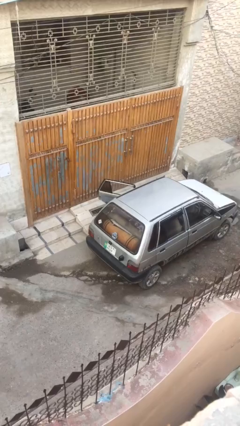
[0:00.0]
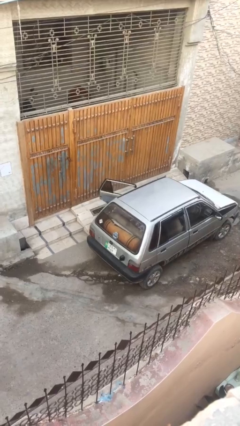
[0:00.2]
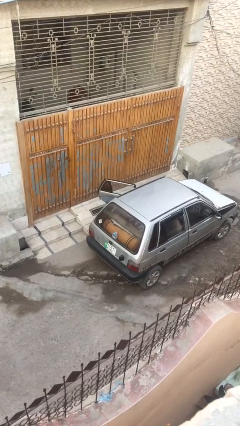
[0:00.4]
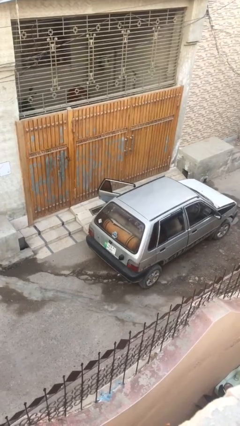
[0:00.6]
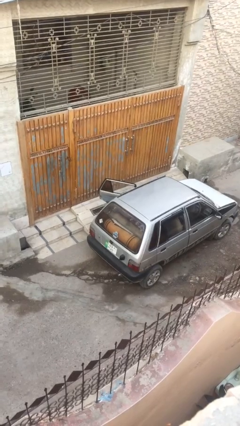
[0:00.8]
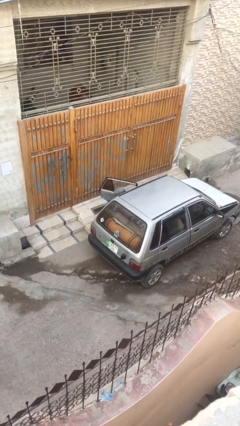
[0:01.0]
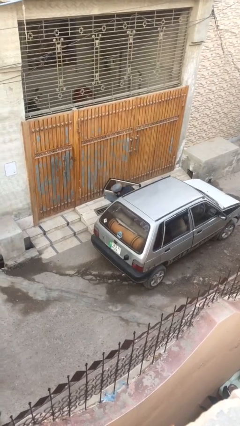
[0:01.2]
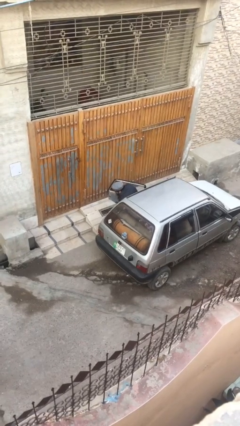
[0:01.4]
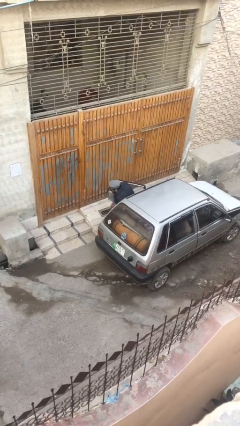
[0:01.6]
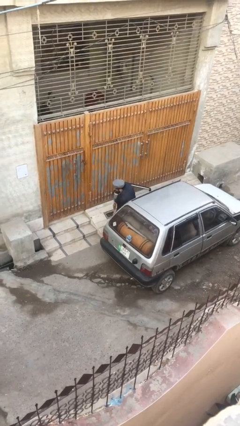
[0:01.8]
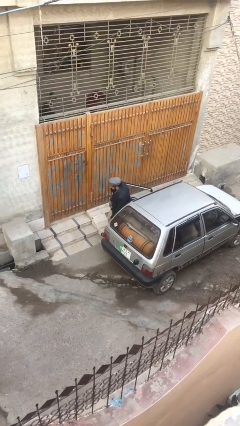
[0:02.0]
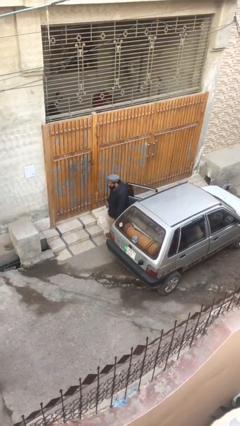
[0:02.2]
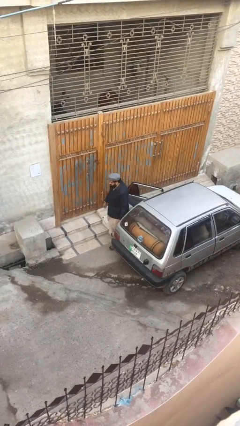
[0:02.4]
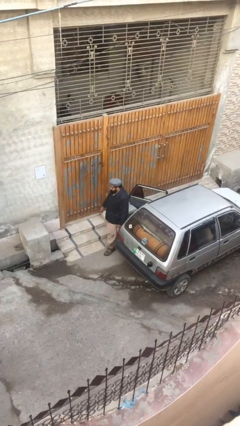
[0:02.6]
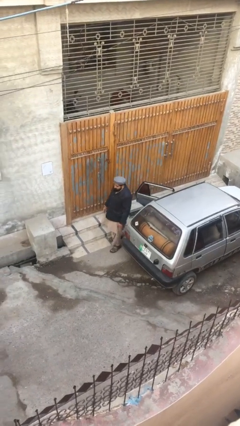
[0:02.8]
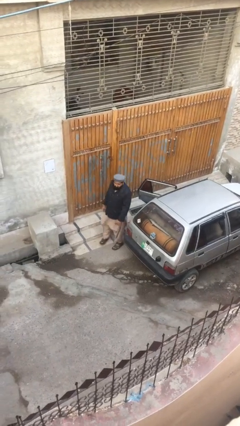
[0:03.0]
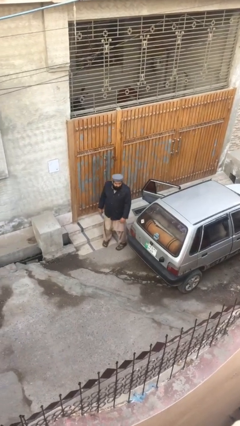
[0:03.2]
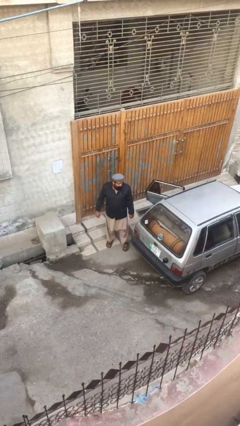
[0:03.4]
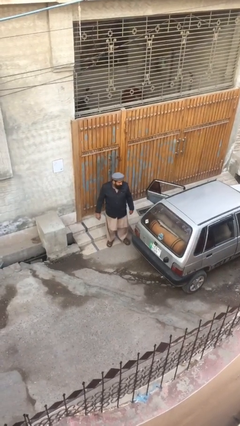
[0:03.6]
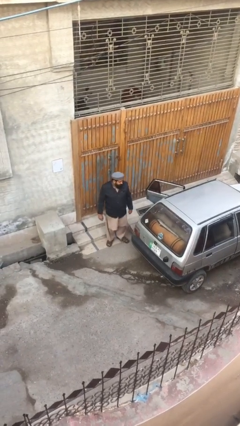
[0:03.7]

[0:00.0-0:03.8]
person exits car

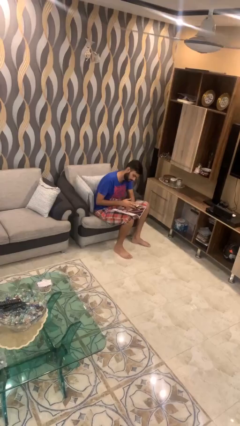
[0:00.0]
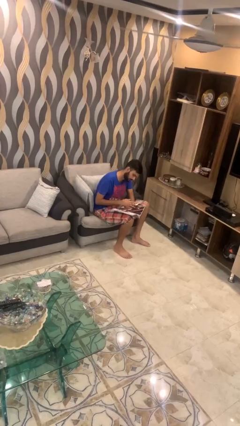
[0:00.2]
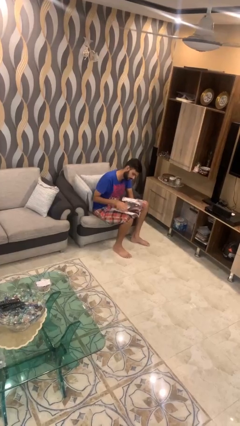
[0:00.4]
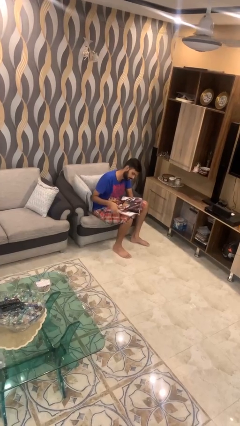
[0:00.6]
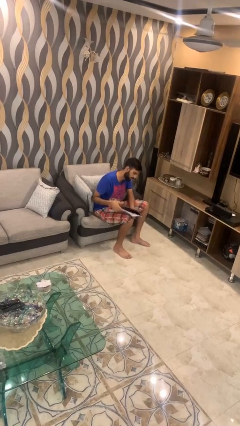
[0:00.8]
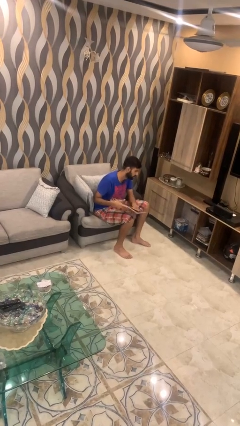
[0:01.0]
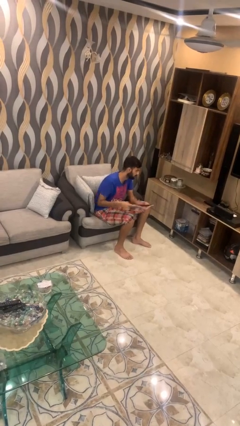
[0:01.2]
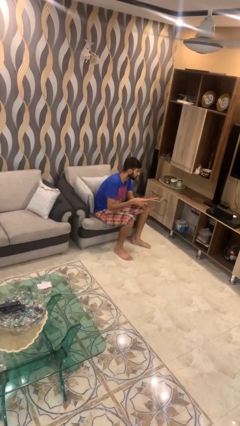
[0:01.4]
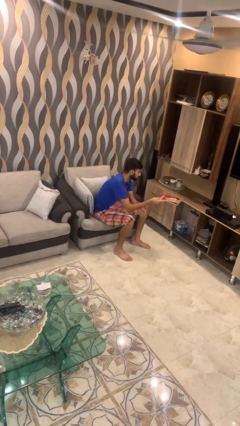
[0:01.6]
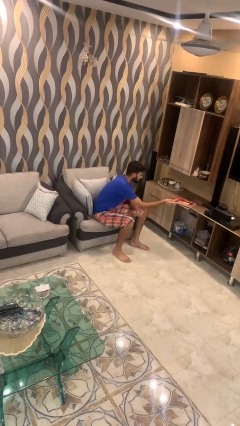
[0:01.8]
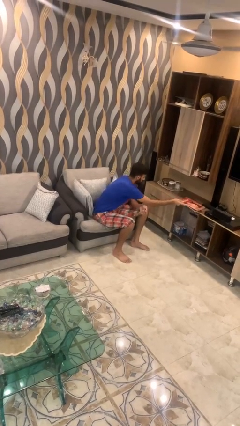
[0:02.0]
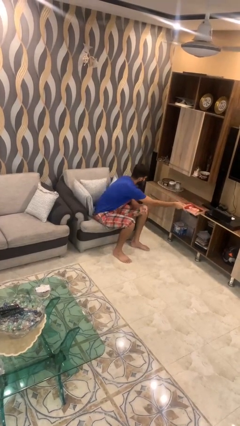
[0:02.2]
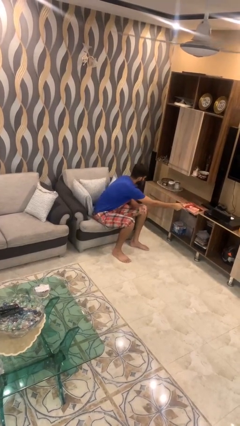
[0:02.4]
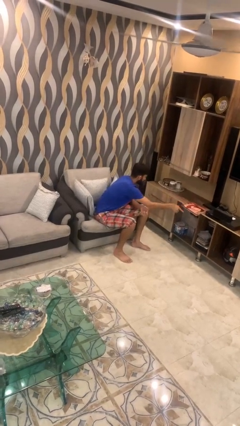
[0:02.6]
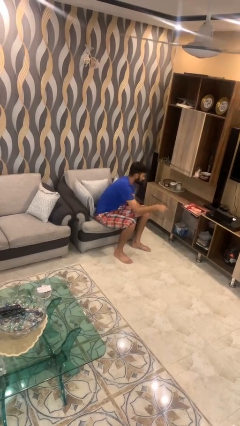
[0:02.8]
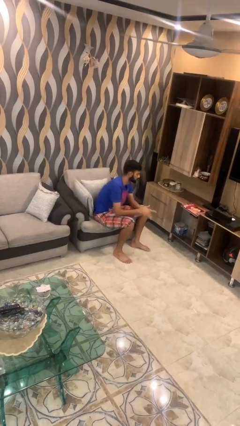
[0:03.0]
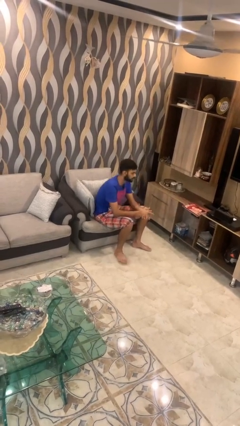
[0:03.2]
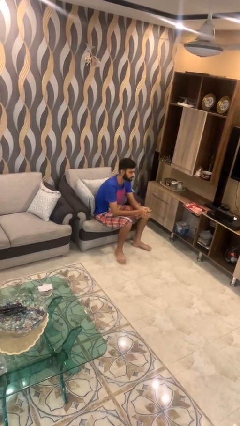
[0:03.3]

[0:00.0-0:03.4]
person puts down object on table

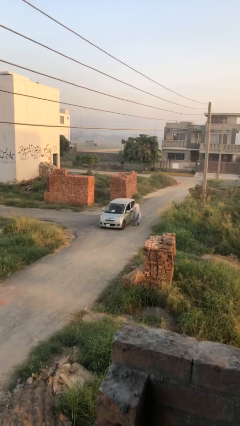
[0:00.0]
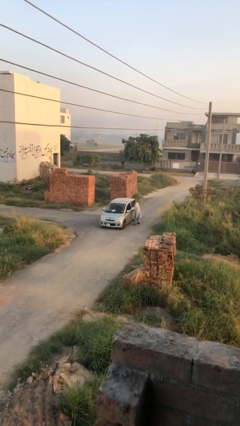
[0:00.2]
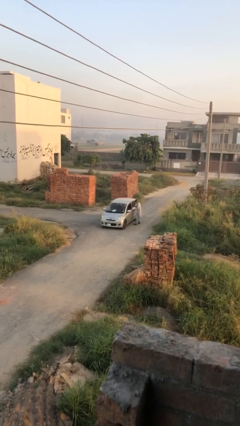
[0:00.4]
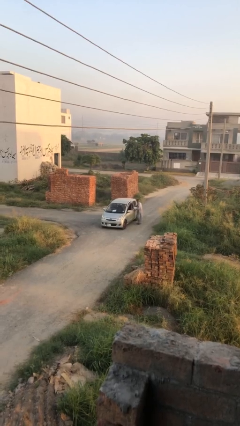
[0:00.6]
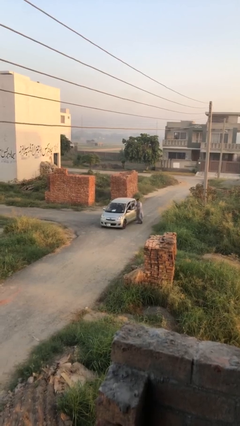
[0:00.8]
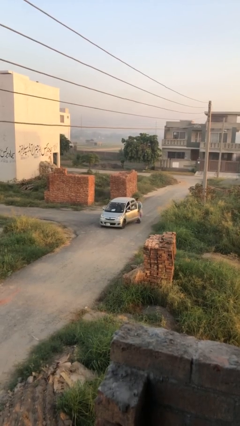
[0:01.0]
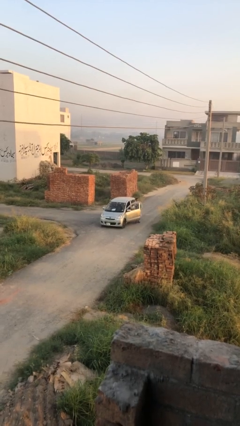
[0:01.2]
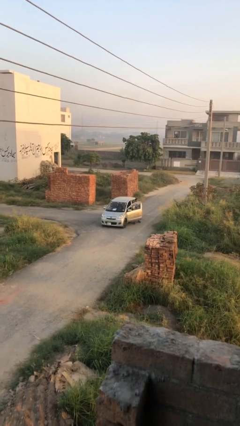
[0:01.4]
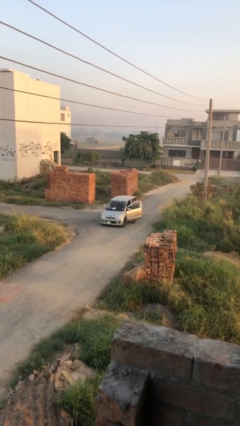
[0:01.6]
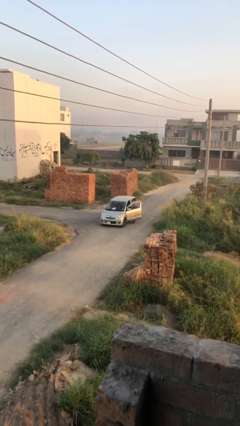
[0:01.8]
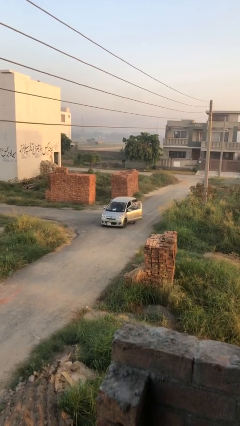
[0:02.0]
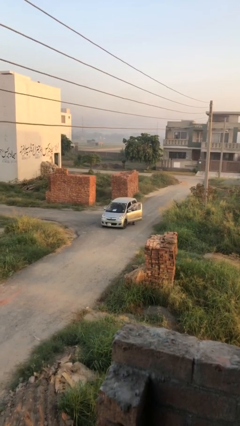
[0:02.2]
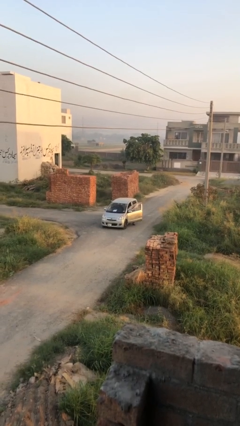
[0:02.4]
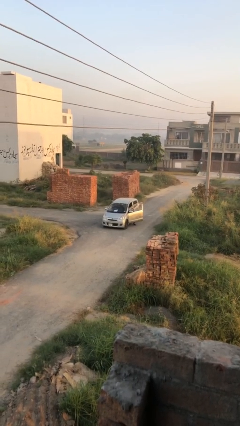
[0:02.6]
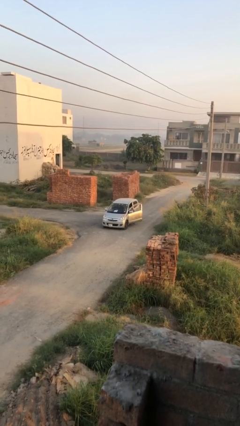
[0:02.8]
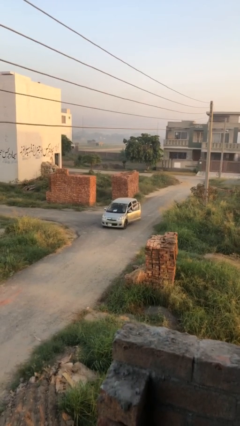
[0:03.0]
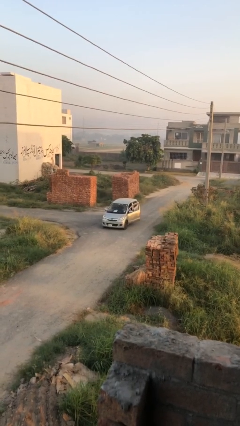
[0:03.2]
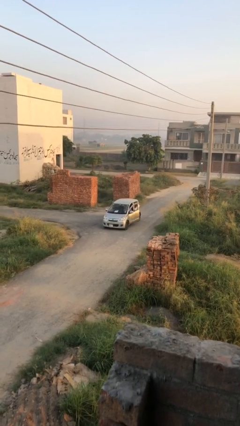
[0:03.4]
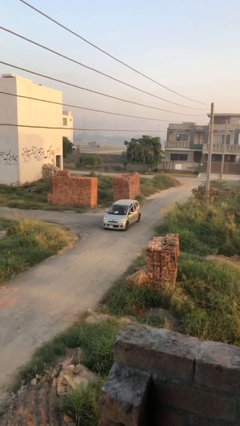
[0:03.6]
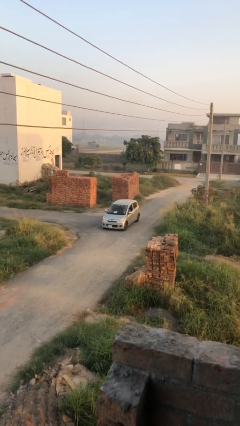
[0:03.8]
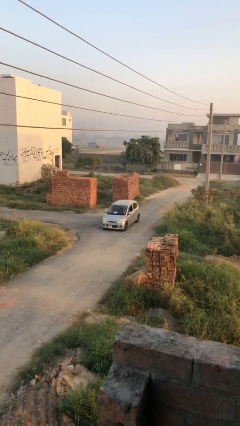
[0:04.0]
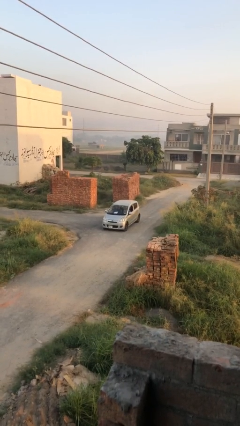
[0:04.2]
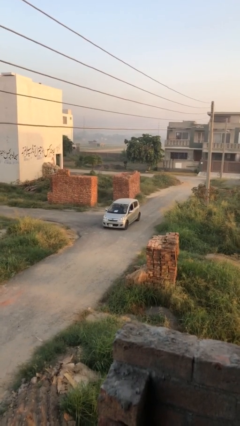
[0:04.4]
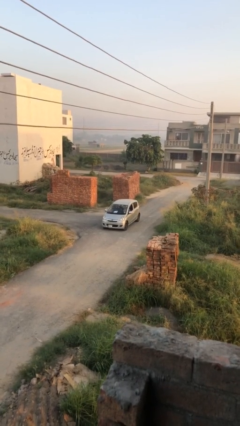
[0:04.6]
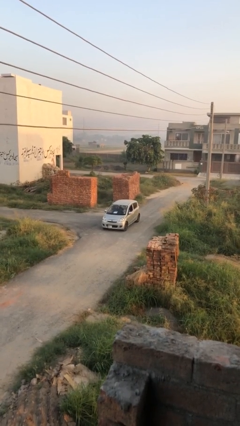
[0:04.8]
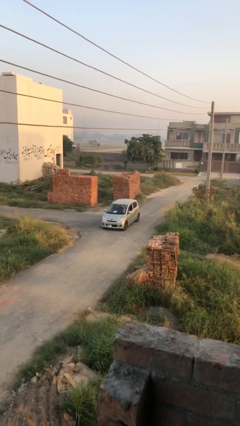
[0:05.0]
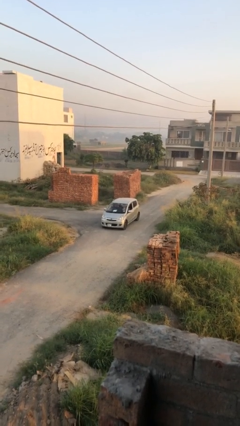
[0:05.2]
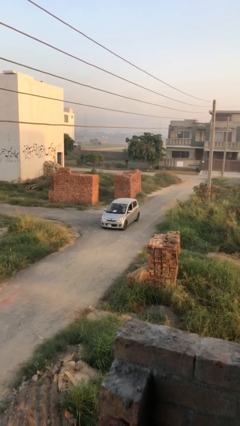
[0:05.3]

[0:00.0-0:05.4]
car picks up person

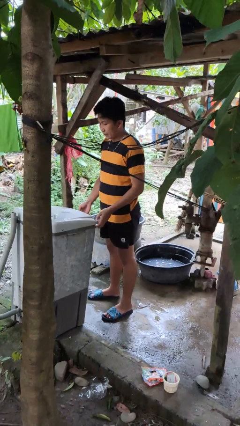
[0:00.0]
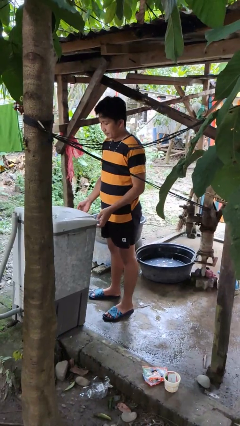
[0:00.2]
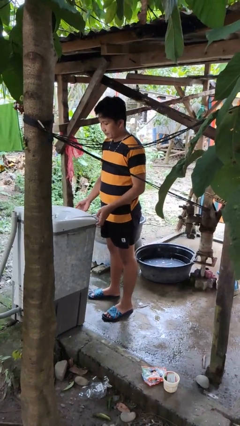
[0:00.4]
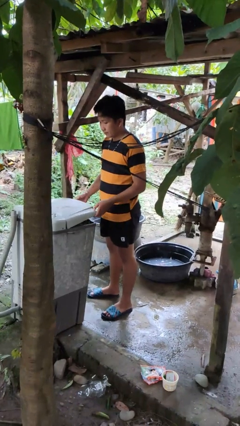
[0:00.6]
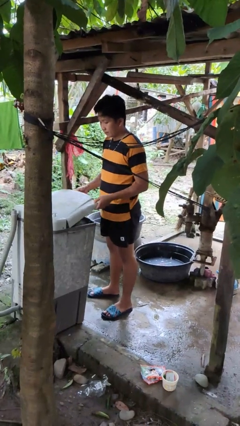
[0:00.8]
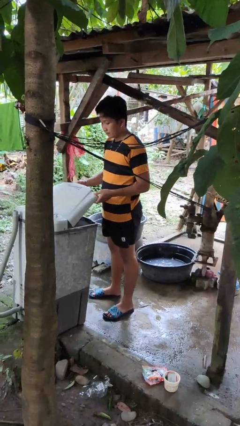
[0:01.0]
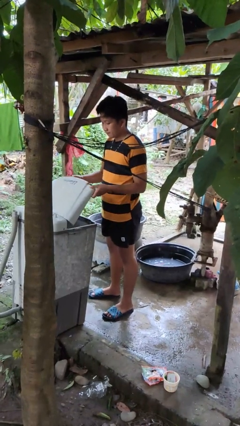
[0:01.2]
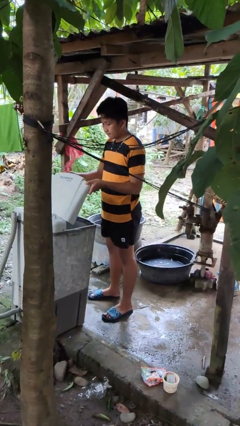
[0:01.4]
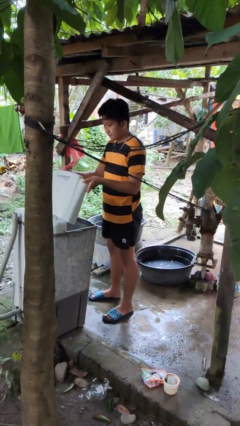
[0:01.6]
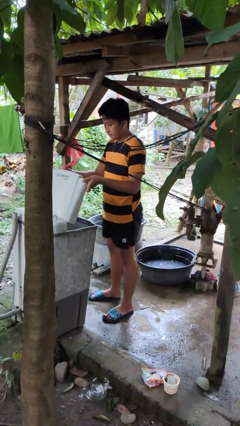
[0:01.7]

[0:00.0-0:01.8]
person opens clothes washer

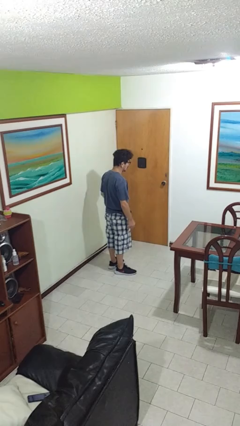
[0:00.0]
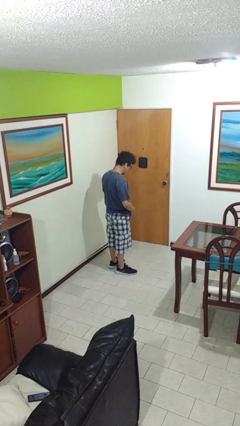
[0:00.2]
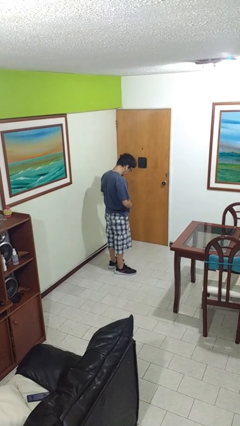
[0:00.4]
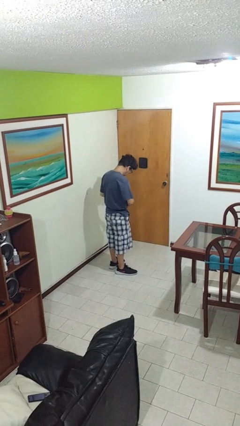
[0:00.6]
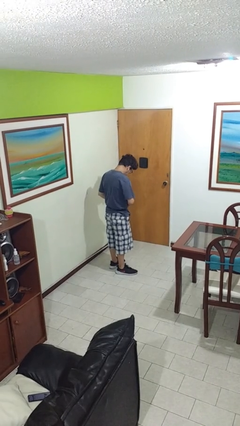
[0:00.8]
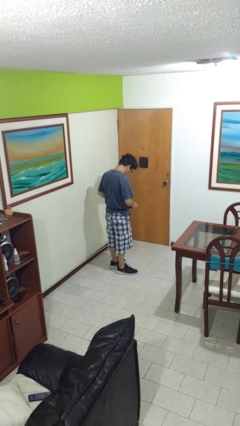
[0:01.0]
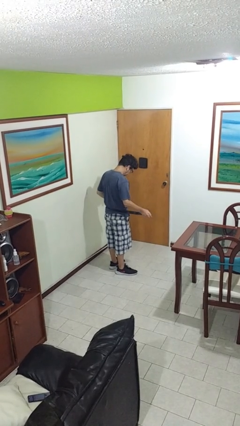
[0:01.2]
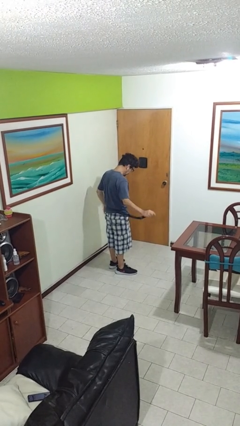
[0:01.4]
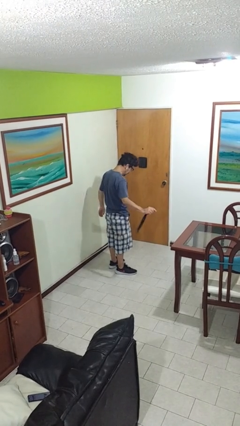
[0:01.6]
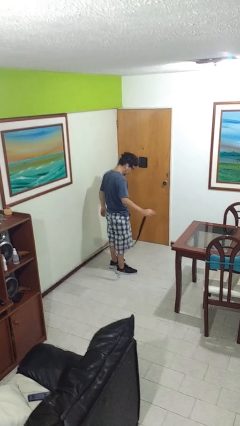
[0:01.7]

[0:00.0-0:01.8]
person takes off belt

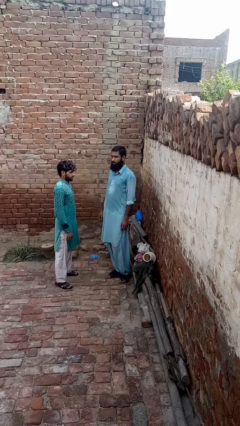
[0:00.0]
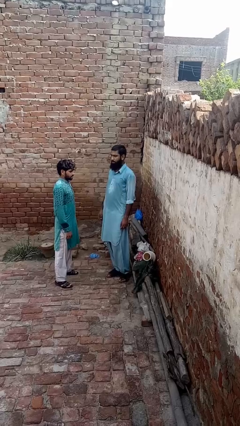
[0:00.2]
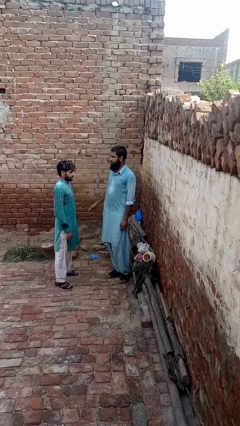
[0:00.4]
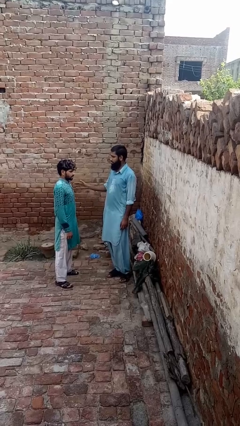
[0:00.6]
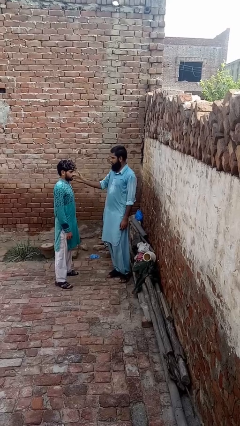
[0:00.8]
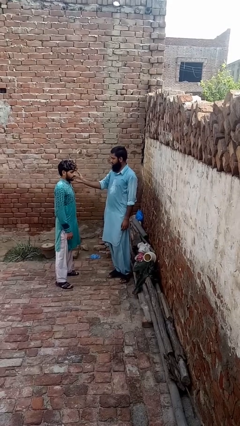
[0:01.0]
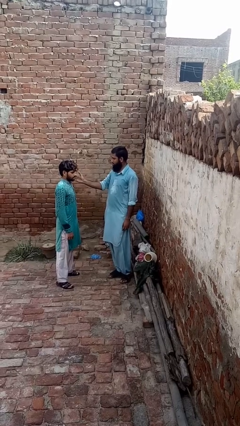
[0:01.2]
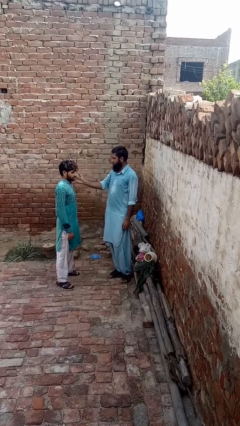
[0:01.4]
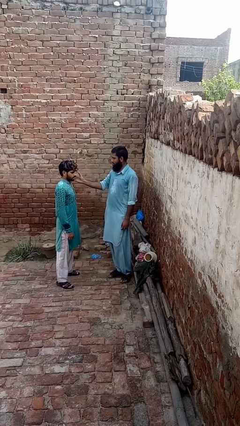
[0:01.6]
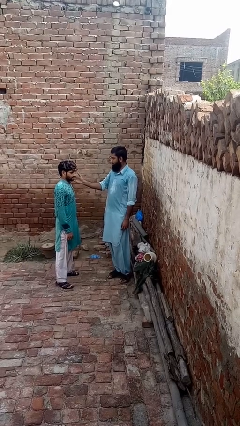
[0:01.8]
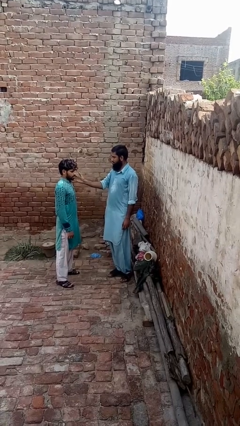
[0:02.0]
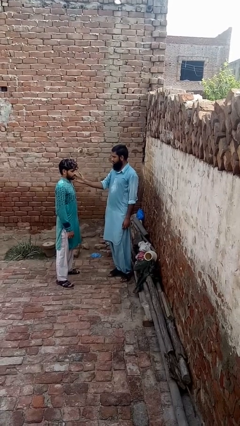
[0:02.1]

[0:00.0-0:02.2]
person touches face of person
